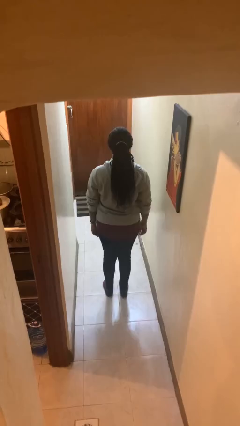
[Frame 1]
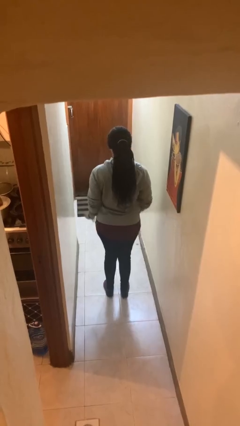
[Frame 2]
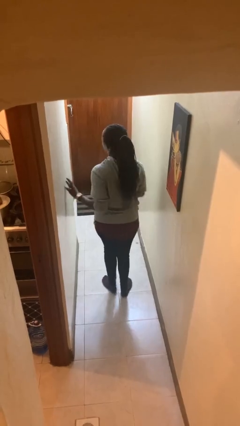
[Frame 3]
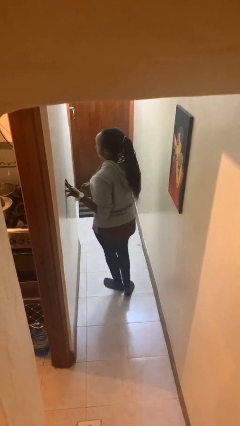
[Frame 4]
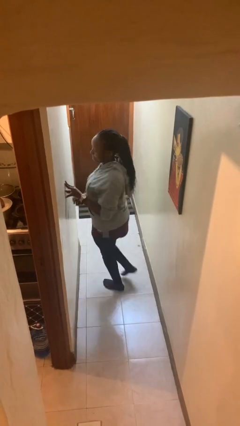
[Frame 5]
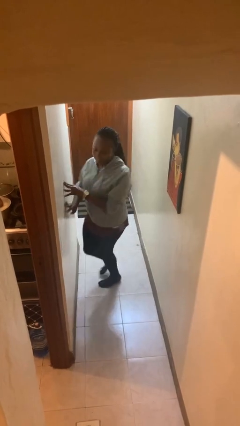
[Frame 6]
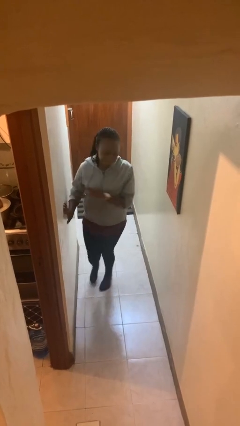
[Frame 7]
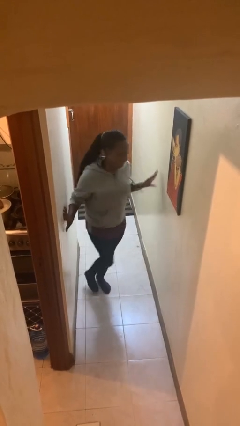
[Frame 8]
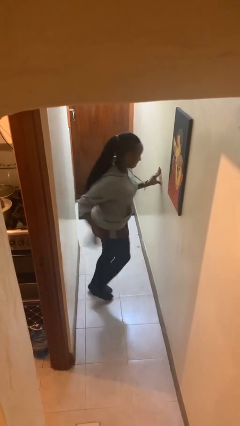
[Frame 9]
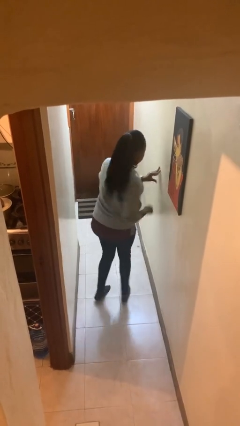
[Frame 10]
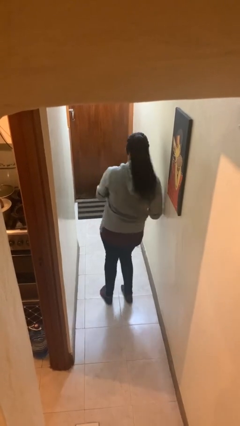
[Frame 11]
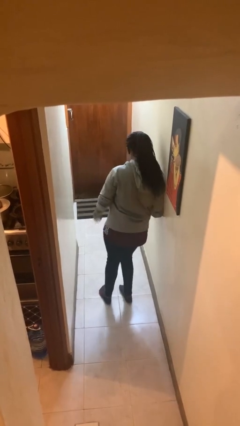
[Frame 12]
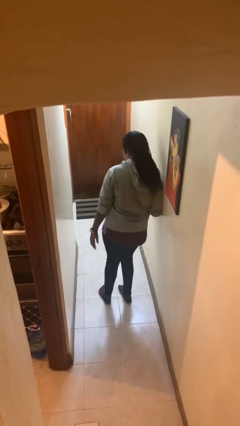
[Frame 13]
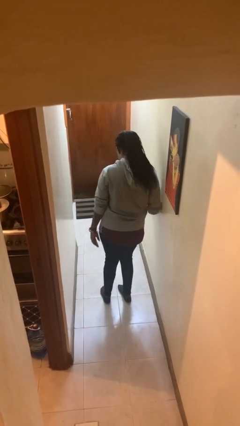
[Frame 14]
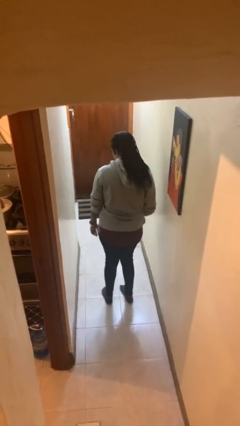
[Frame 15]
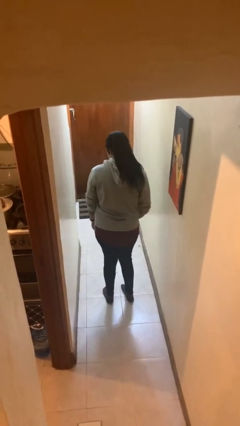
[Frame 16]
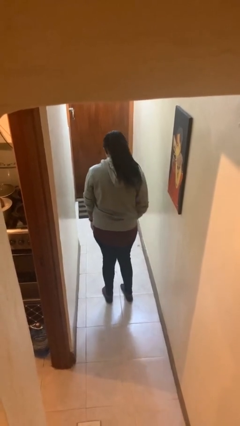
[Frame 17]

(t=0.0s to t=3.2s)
person twirls

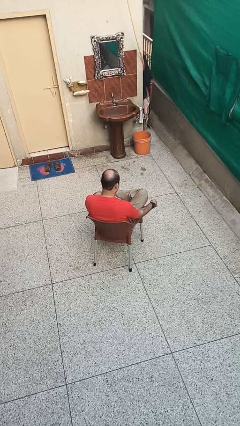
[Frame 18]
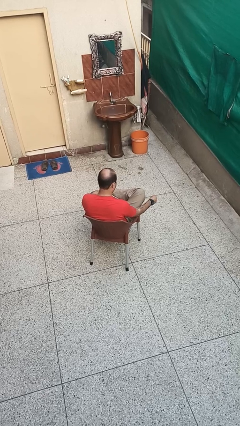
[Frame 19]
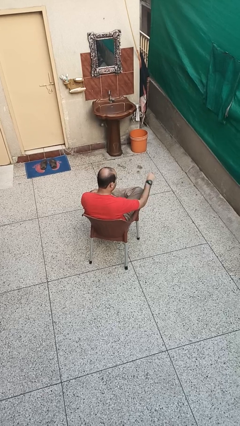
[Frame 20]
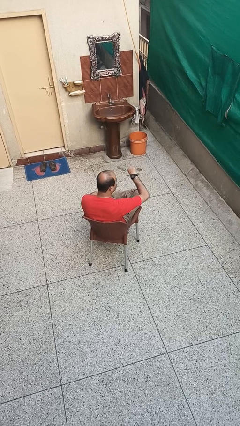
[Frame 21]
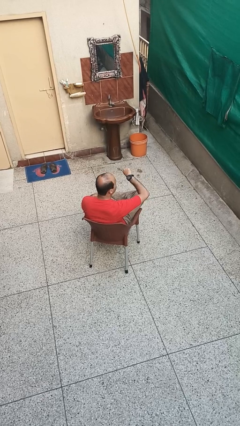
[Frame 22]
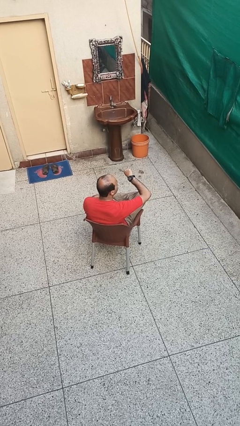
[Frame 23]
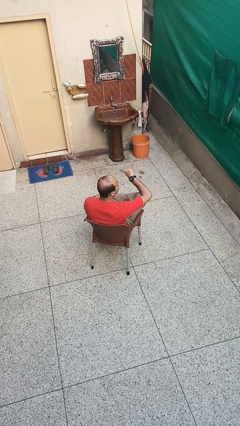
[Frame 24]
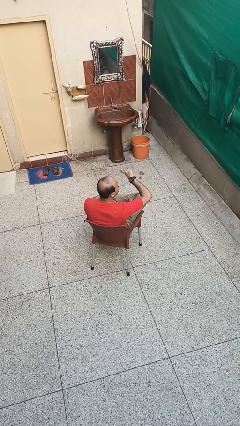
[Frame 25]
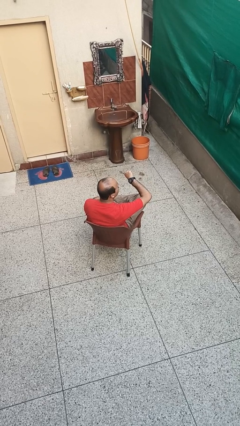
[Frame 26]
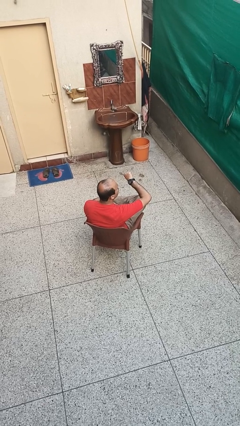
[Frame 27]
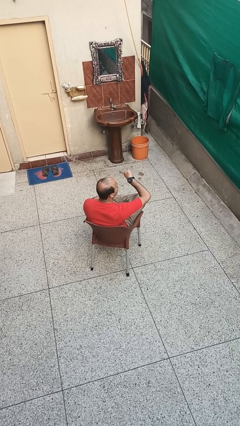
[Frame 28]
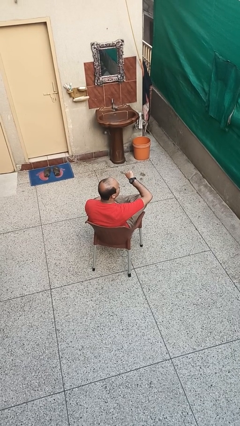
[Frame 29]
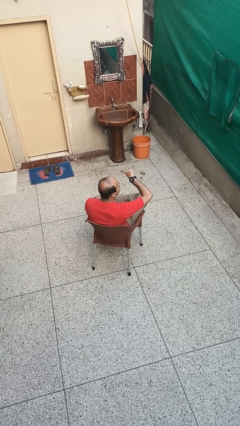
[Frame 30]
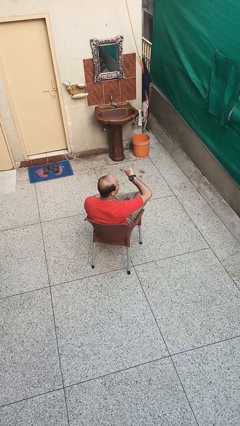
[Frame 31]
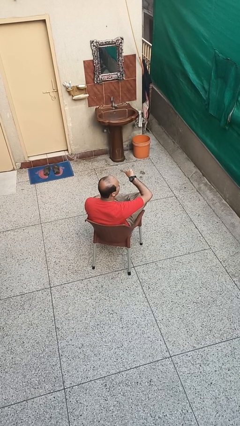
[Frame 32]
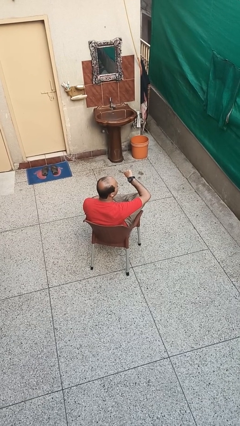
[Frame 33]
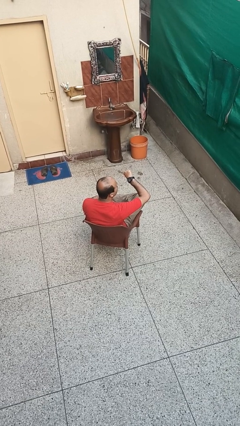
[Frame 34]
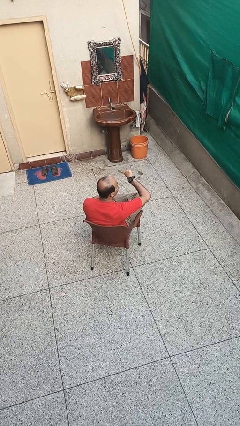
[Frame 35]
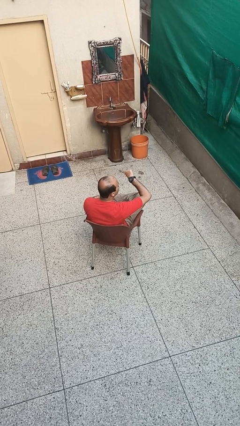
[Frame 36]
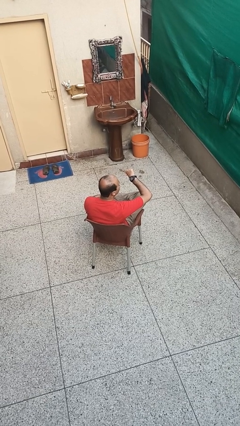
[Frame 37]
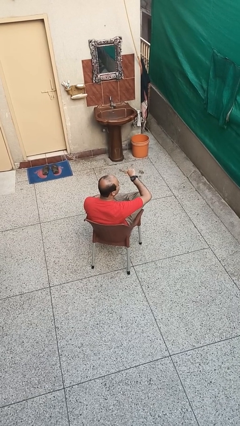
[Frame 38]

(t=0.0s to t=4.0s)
person looks at wristwatch

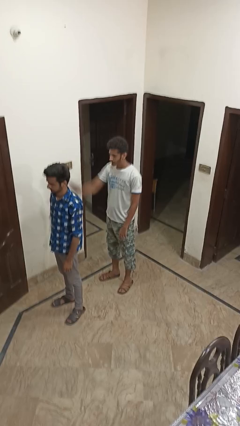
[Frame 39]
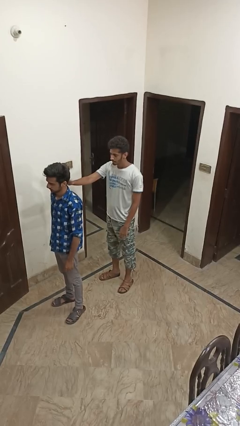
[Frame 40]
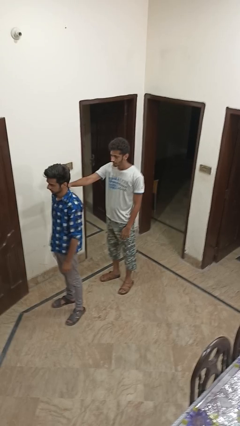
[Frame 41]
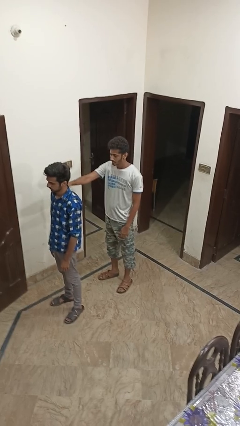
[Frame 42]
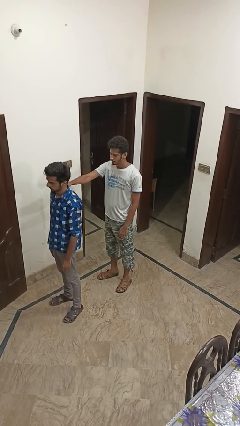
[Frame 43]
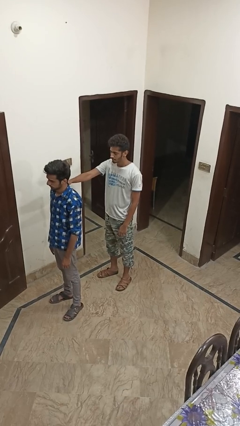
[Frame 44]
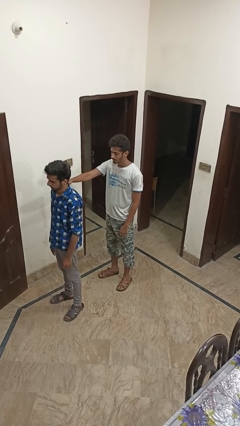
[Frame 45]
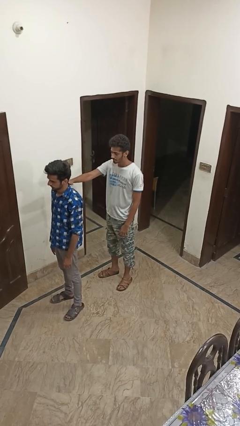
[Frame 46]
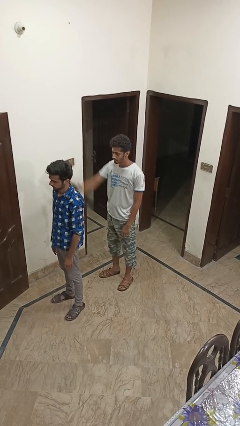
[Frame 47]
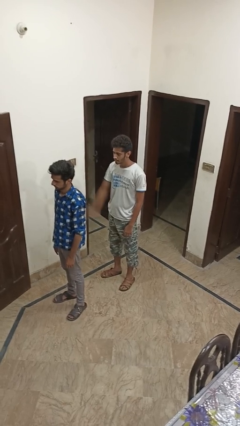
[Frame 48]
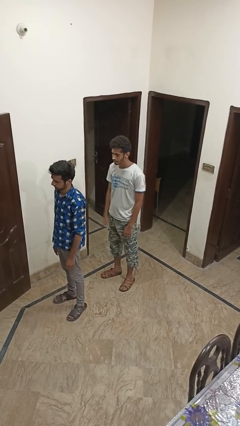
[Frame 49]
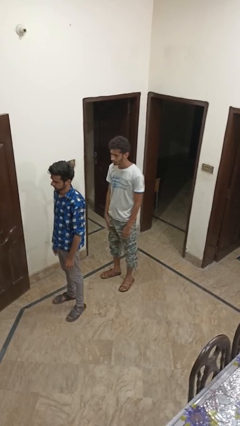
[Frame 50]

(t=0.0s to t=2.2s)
person touches back of person

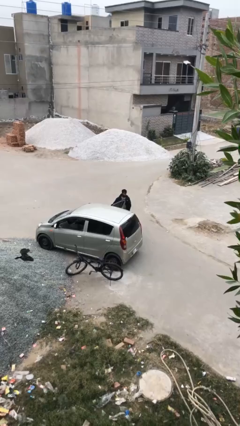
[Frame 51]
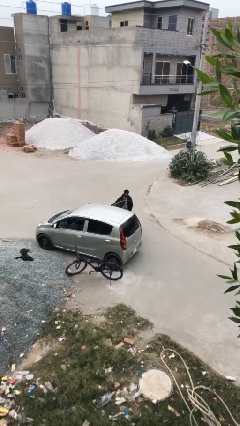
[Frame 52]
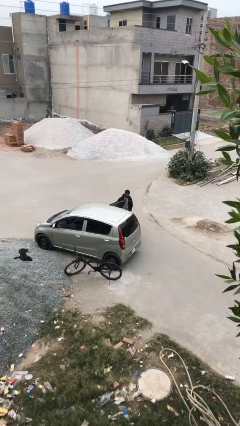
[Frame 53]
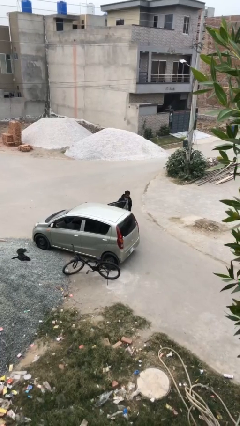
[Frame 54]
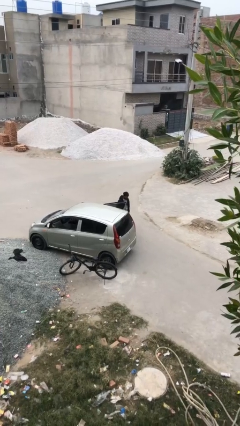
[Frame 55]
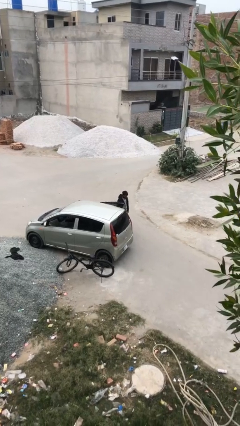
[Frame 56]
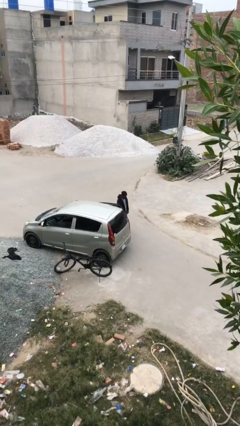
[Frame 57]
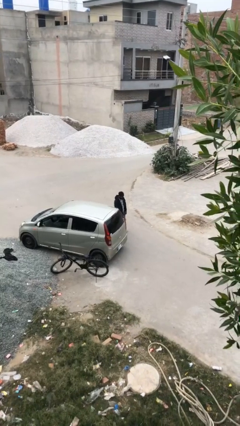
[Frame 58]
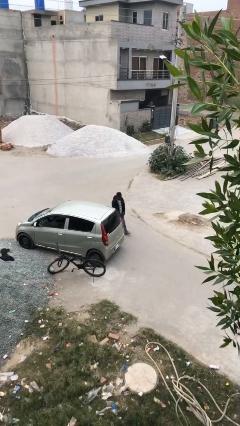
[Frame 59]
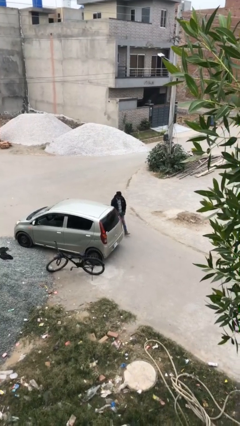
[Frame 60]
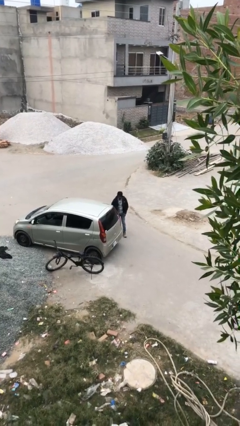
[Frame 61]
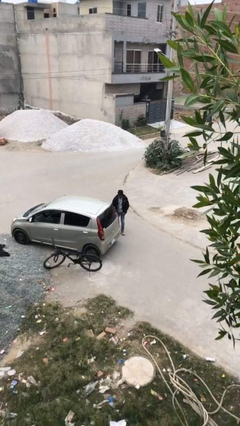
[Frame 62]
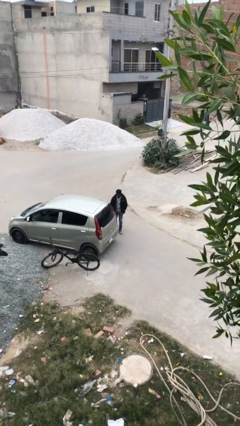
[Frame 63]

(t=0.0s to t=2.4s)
person closes car door

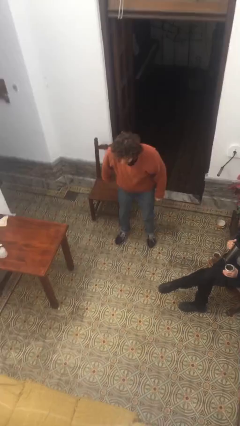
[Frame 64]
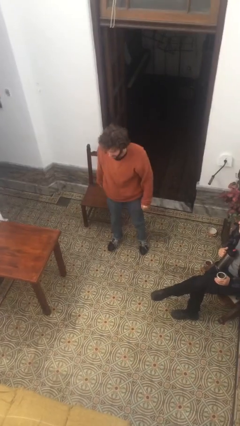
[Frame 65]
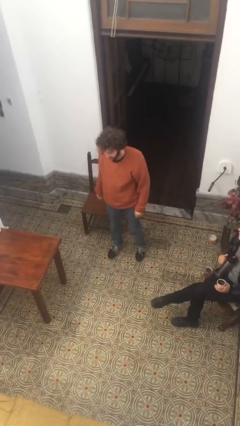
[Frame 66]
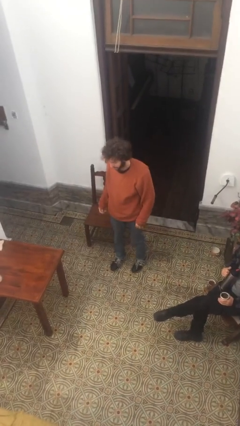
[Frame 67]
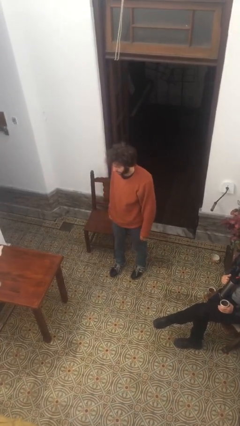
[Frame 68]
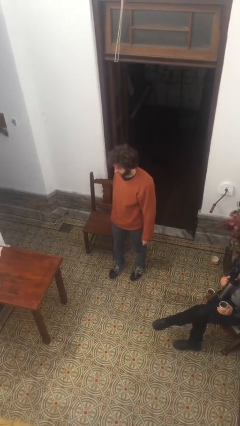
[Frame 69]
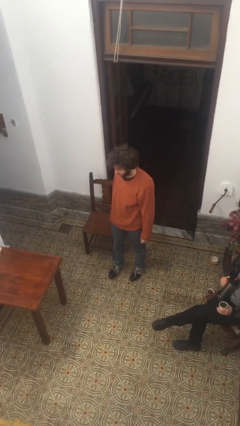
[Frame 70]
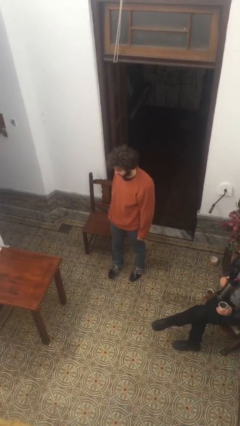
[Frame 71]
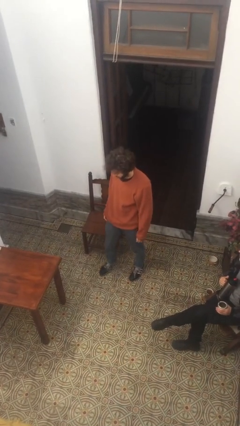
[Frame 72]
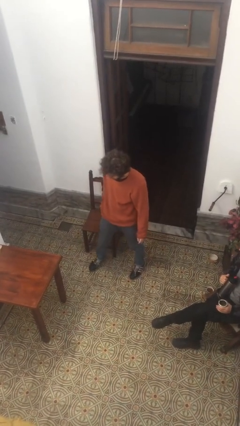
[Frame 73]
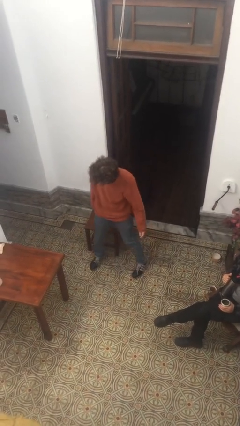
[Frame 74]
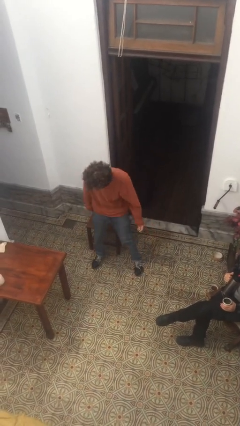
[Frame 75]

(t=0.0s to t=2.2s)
person stands up from floor

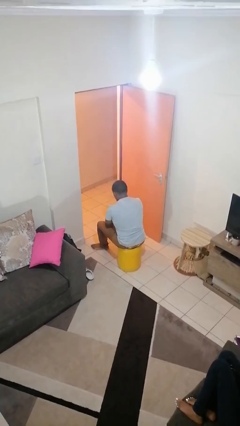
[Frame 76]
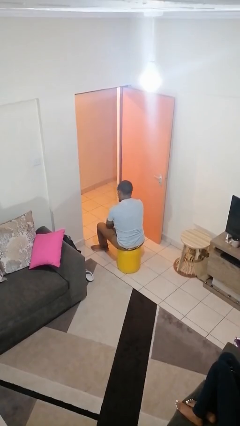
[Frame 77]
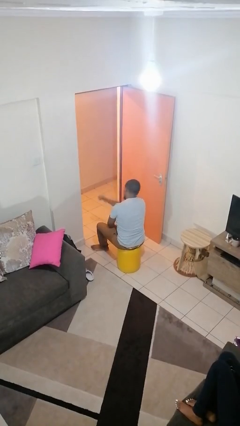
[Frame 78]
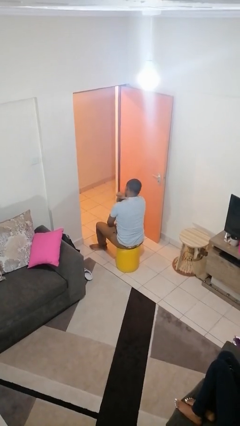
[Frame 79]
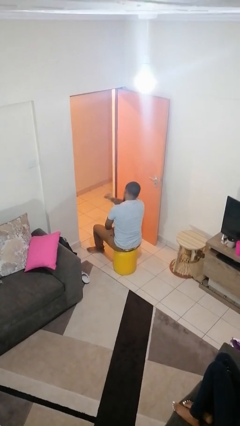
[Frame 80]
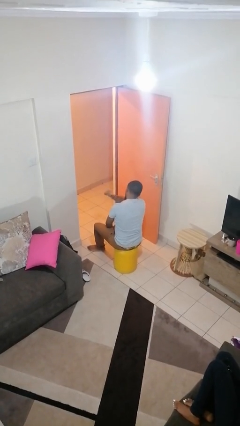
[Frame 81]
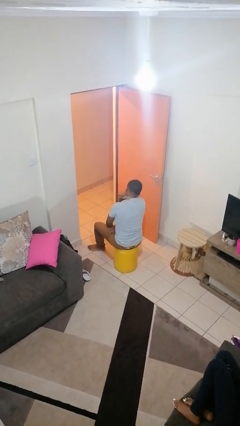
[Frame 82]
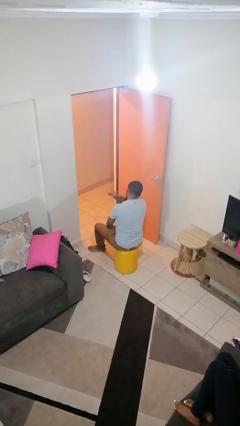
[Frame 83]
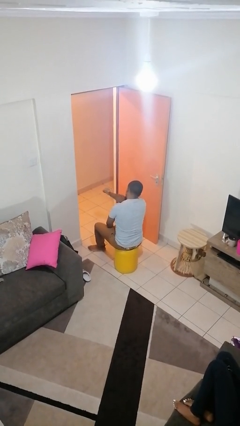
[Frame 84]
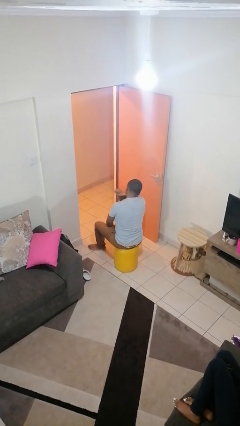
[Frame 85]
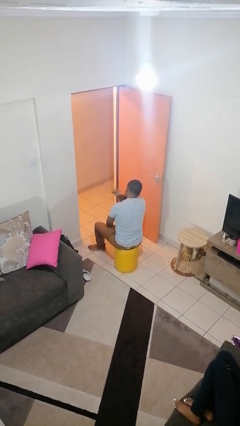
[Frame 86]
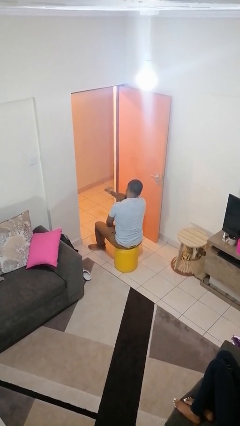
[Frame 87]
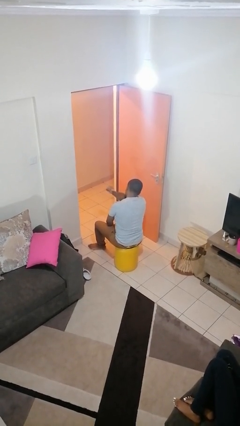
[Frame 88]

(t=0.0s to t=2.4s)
person gestures behind me

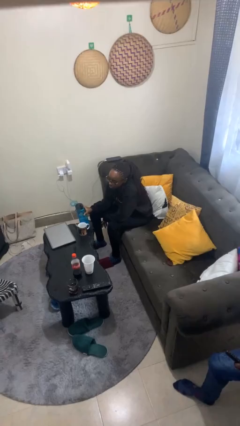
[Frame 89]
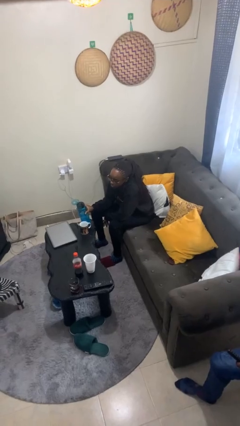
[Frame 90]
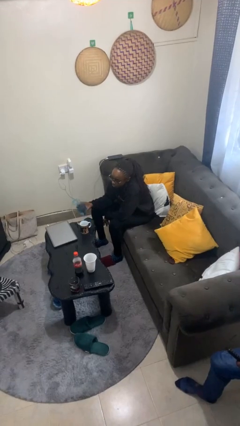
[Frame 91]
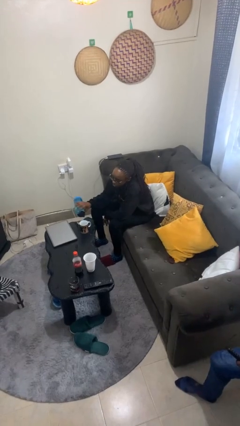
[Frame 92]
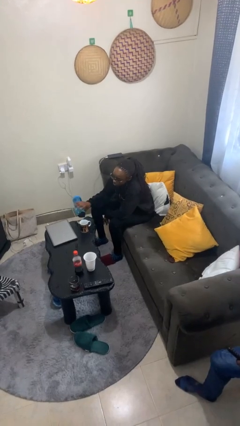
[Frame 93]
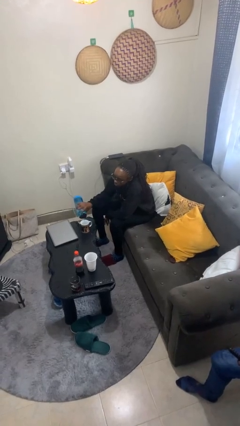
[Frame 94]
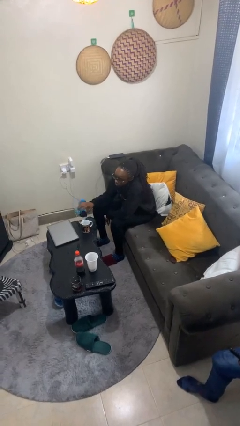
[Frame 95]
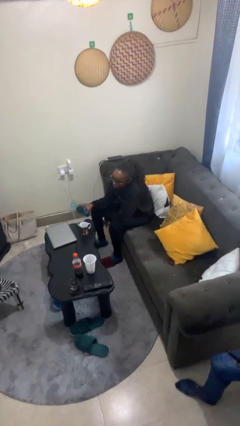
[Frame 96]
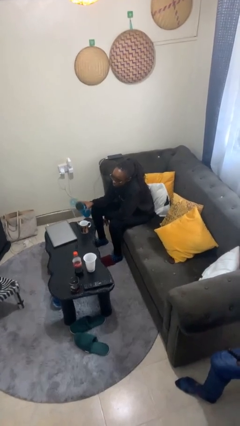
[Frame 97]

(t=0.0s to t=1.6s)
person pours liquid into cup
